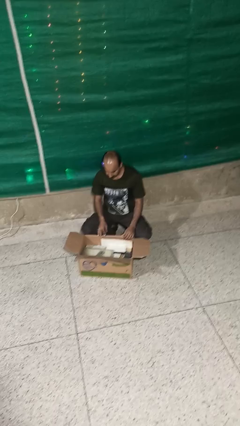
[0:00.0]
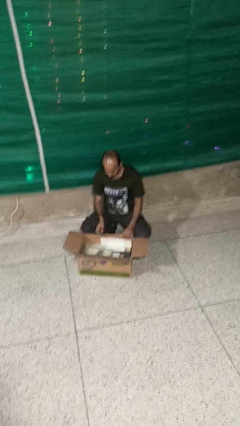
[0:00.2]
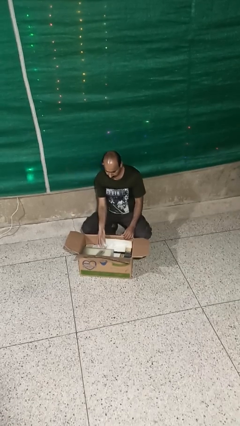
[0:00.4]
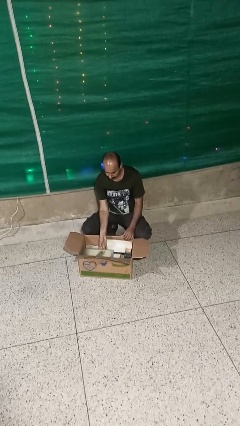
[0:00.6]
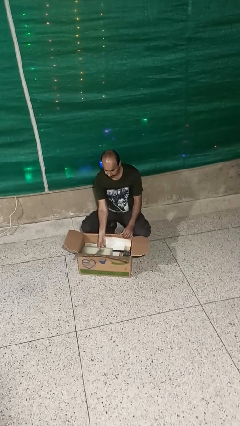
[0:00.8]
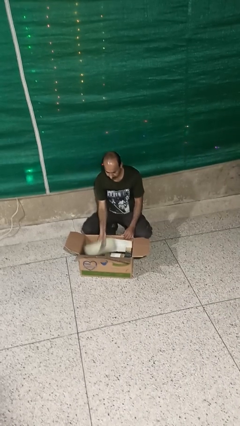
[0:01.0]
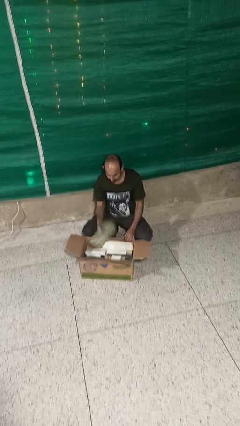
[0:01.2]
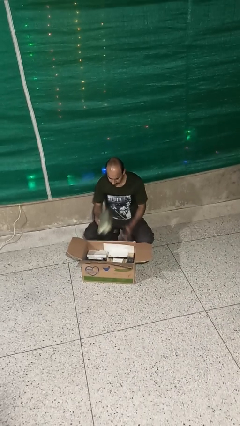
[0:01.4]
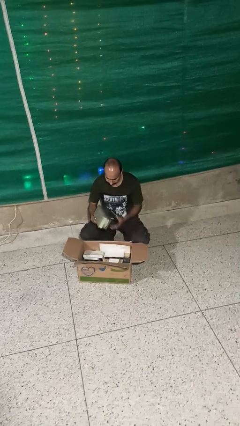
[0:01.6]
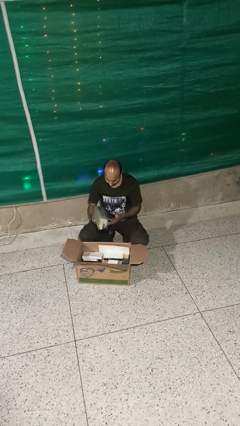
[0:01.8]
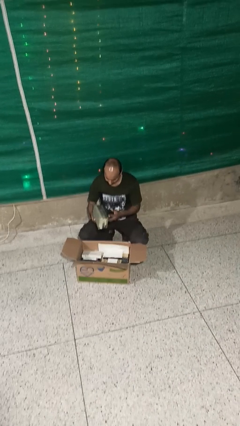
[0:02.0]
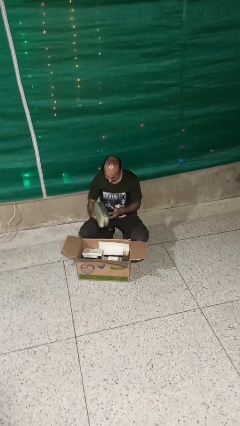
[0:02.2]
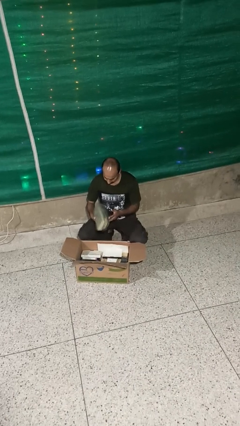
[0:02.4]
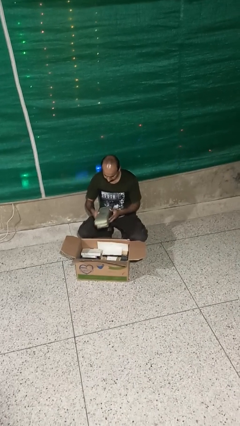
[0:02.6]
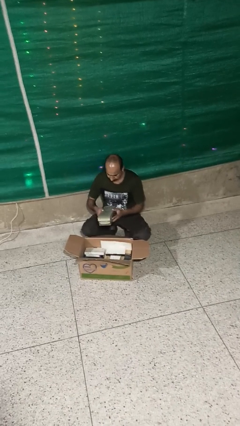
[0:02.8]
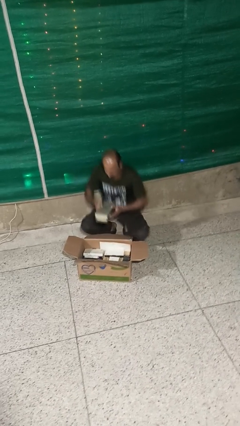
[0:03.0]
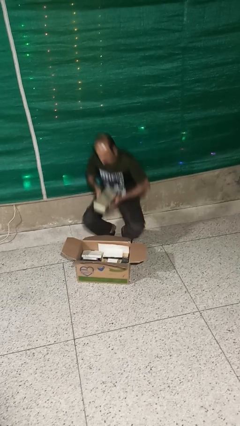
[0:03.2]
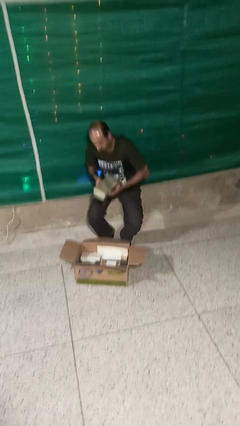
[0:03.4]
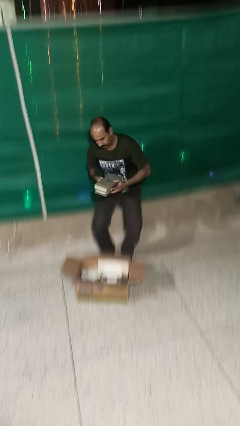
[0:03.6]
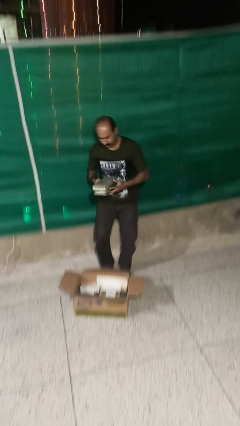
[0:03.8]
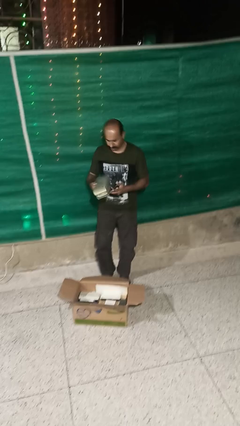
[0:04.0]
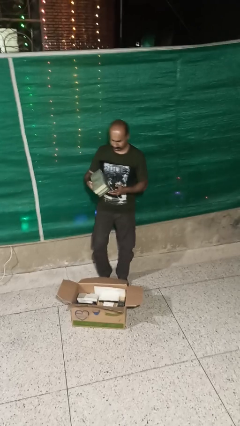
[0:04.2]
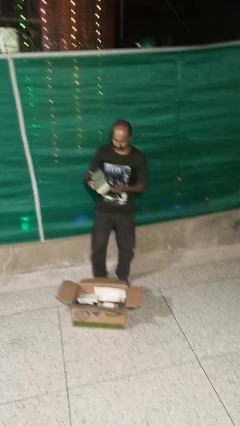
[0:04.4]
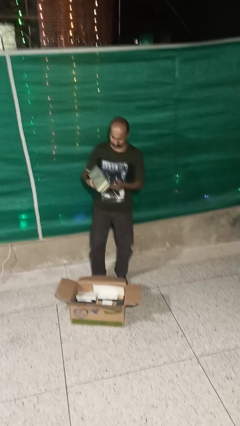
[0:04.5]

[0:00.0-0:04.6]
person takes object from box

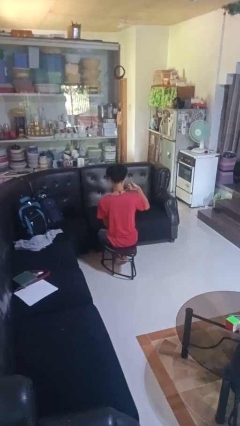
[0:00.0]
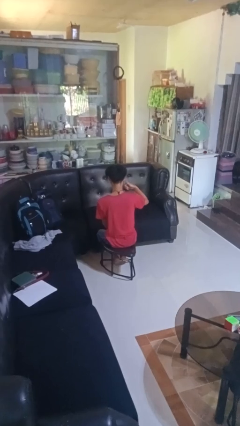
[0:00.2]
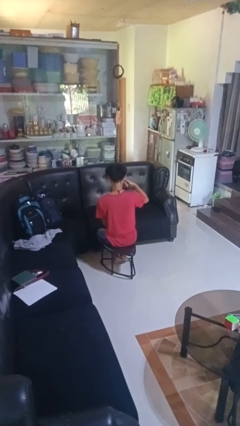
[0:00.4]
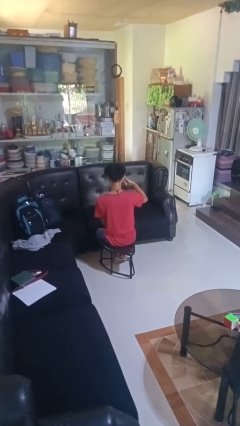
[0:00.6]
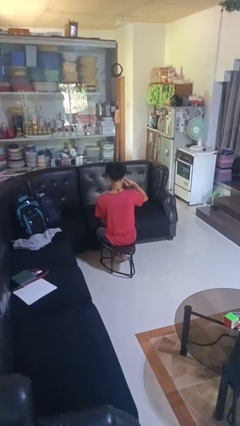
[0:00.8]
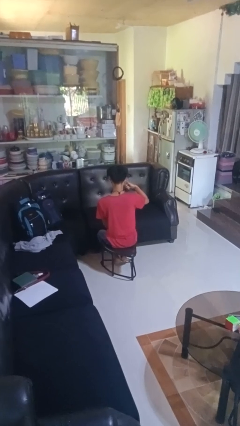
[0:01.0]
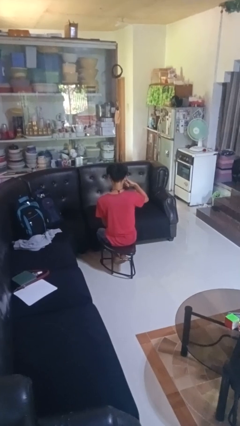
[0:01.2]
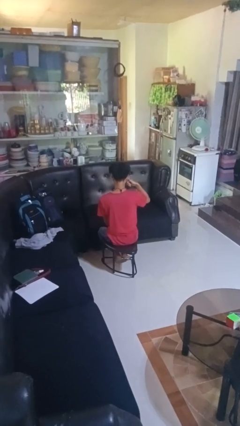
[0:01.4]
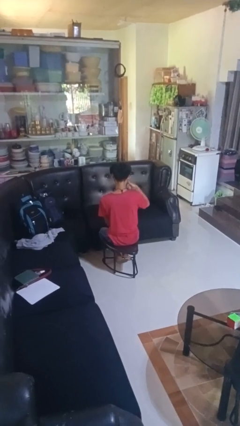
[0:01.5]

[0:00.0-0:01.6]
person gestures call me

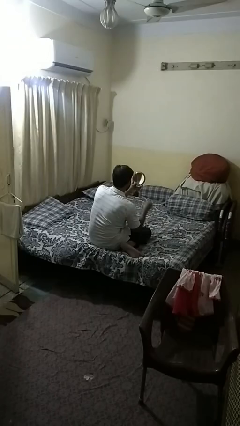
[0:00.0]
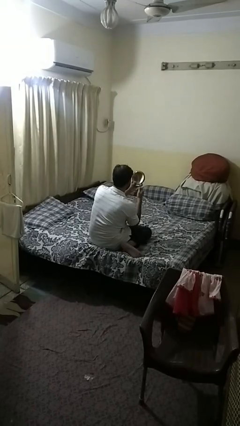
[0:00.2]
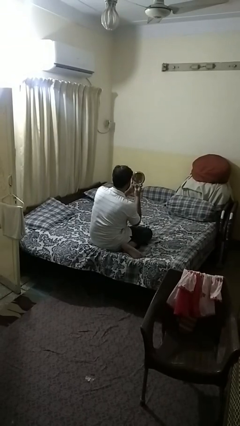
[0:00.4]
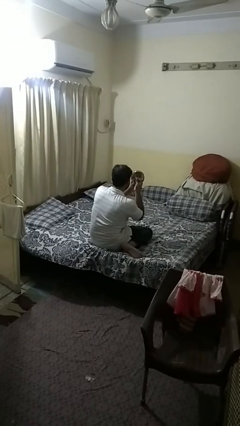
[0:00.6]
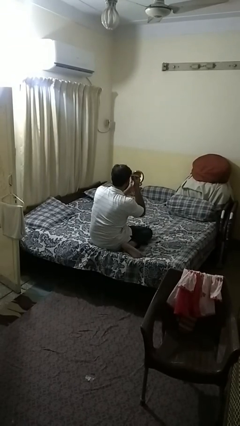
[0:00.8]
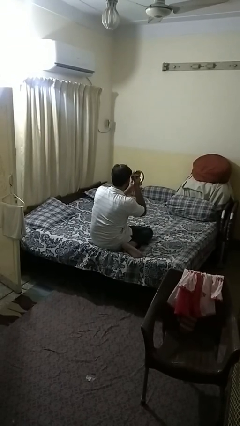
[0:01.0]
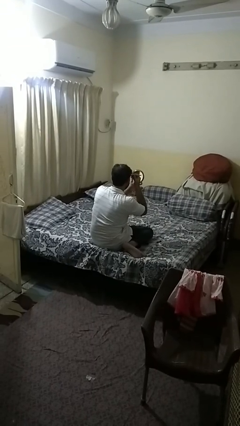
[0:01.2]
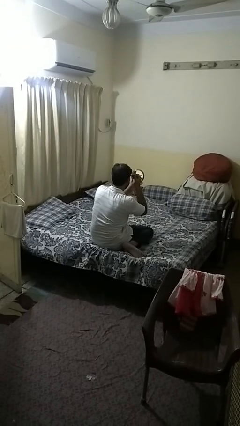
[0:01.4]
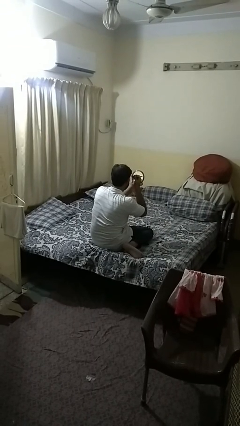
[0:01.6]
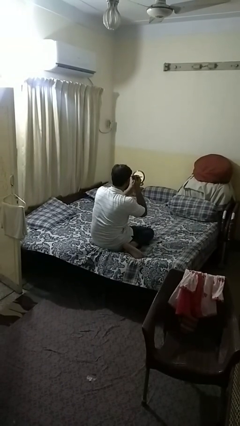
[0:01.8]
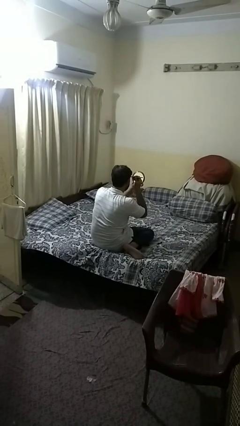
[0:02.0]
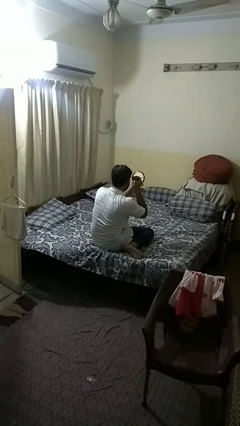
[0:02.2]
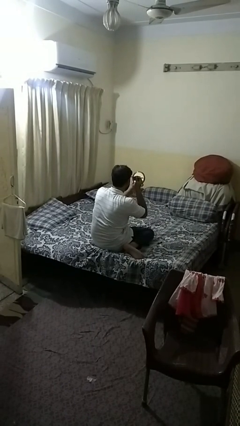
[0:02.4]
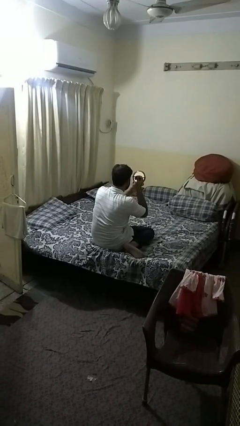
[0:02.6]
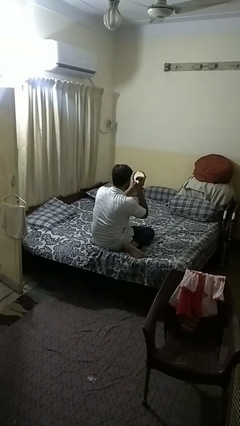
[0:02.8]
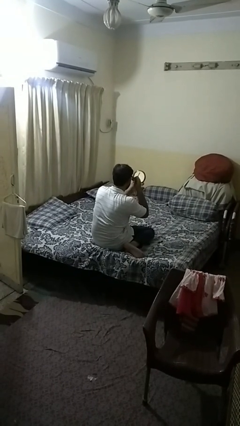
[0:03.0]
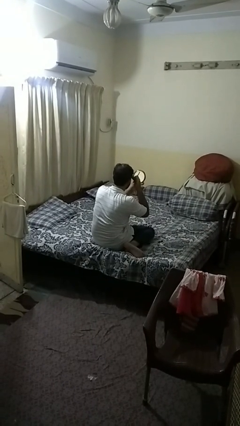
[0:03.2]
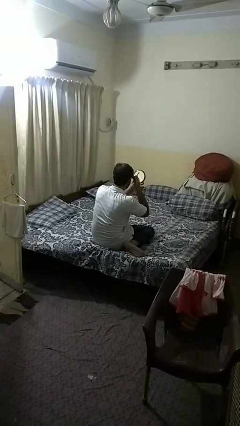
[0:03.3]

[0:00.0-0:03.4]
person applies eye makeup

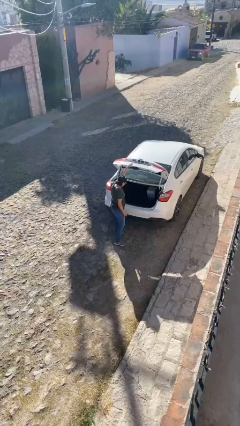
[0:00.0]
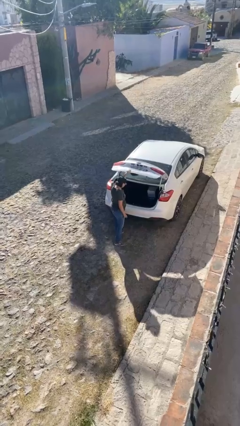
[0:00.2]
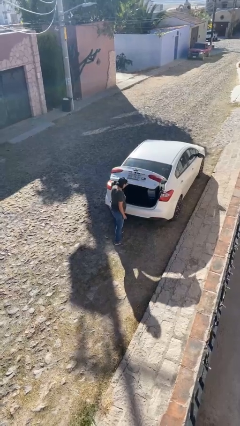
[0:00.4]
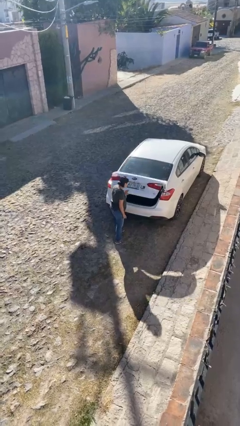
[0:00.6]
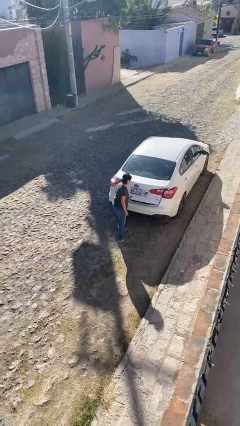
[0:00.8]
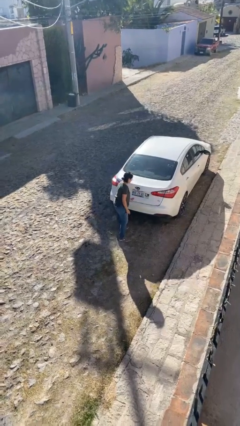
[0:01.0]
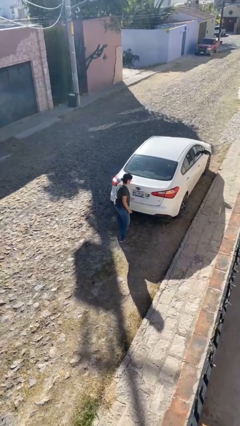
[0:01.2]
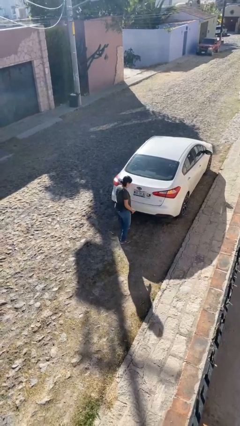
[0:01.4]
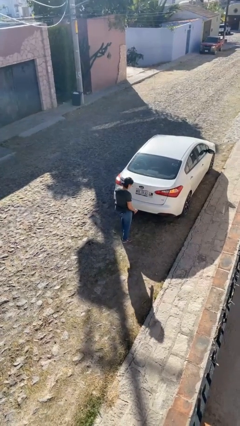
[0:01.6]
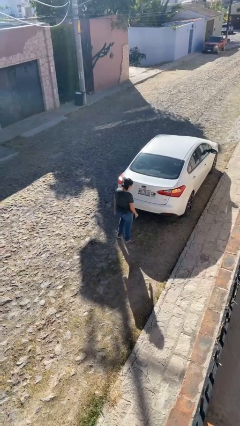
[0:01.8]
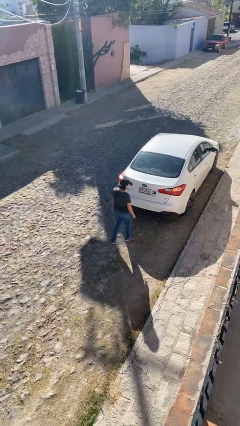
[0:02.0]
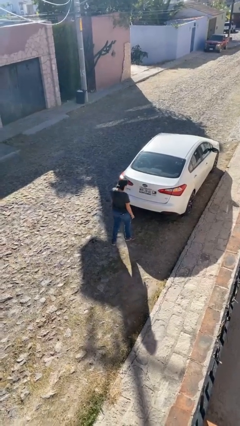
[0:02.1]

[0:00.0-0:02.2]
person closes car trunk

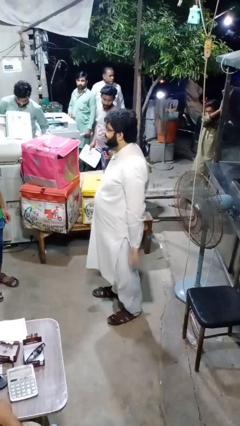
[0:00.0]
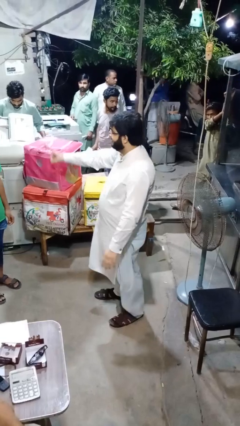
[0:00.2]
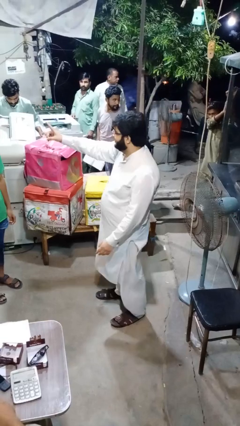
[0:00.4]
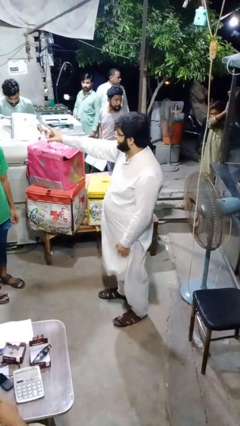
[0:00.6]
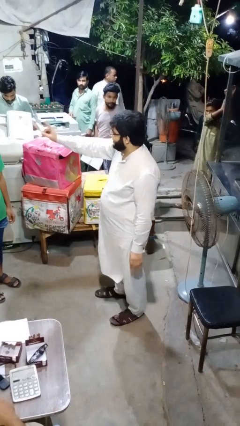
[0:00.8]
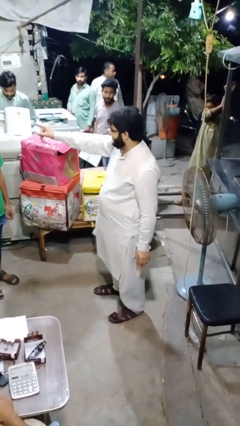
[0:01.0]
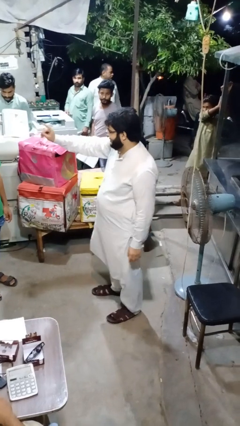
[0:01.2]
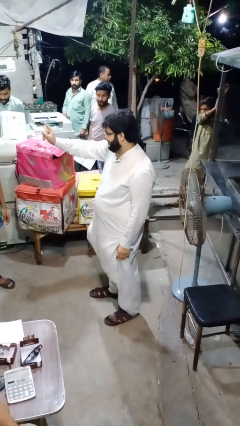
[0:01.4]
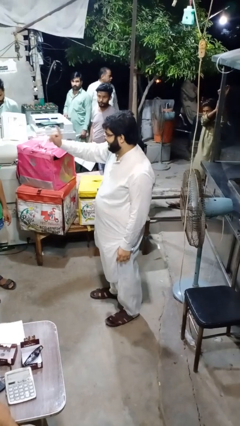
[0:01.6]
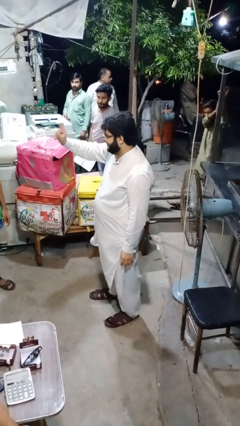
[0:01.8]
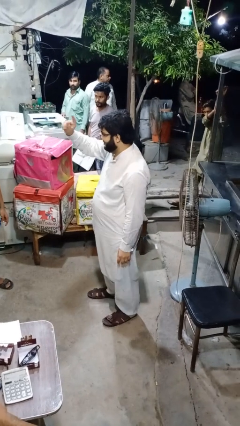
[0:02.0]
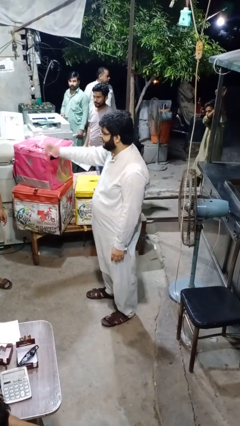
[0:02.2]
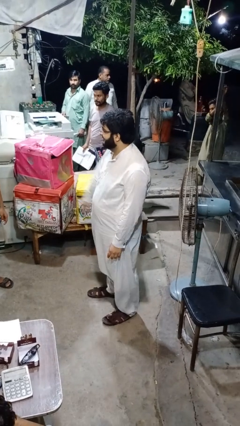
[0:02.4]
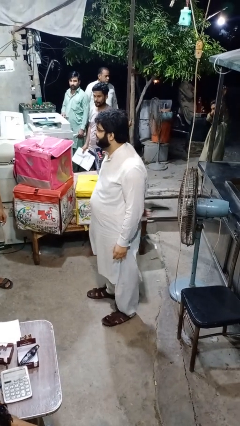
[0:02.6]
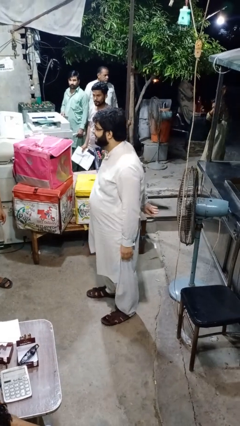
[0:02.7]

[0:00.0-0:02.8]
person points at person

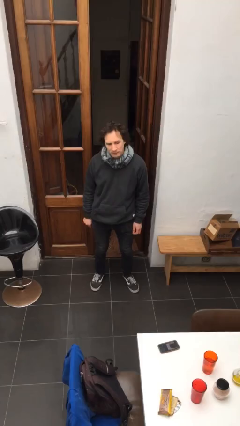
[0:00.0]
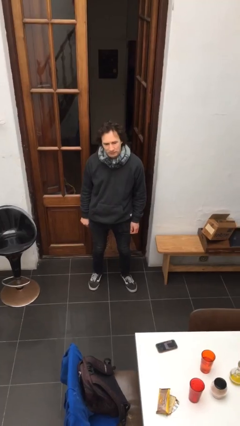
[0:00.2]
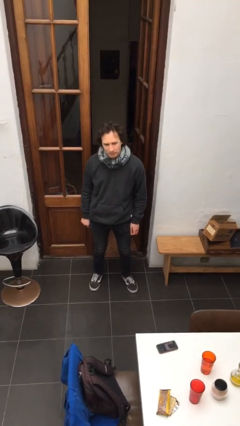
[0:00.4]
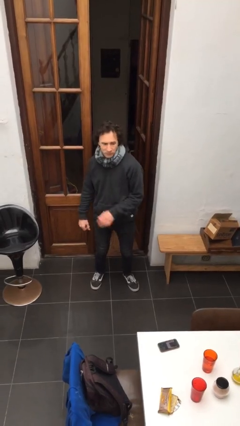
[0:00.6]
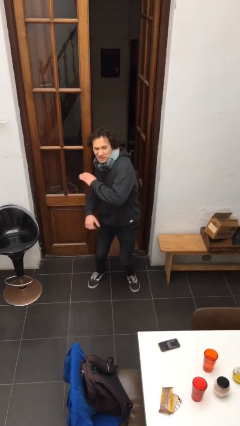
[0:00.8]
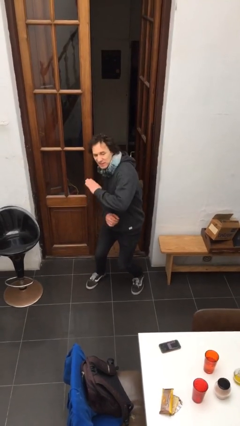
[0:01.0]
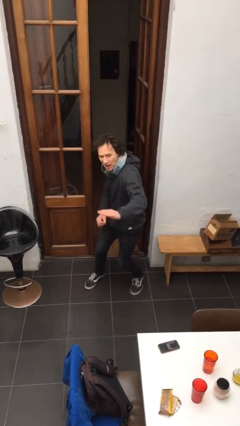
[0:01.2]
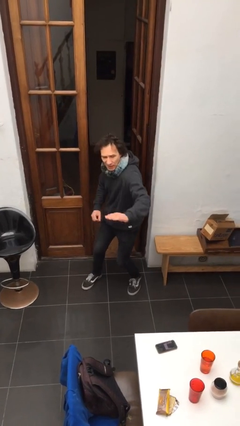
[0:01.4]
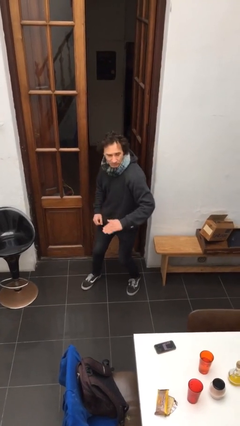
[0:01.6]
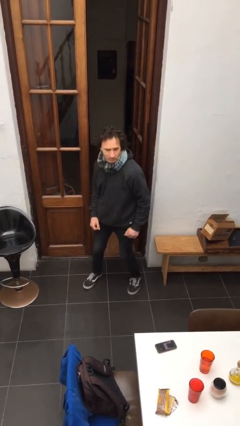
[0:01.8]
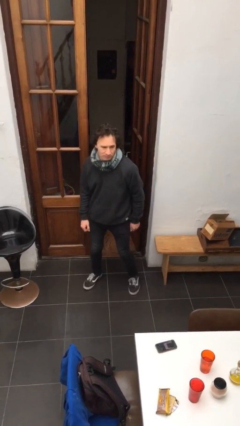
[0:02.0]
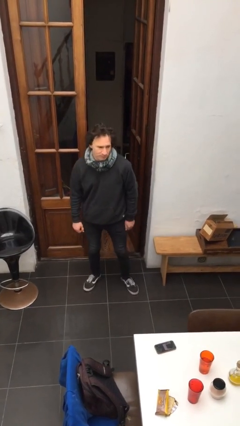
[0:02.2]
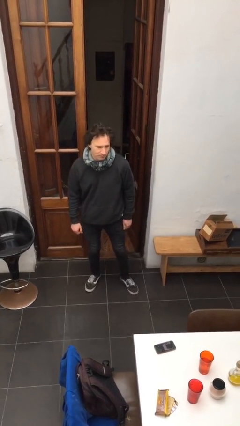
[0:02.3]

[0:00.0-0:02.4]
person karate chop

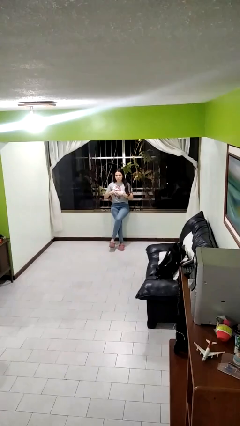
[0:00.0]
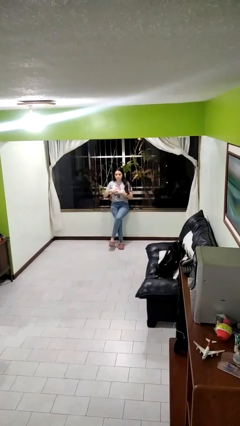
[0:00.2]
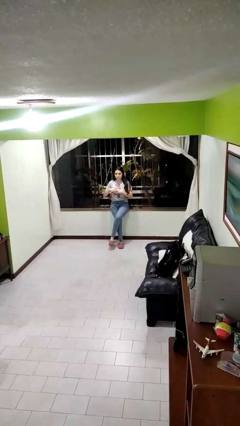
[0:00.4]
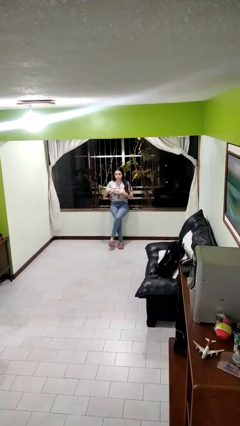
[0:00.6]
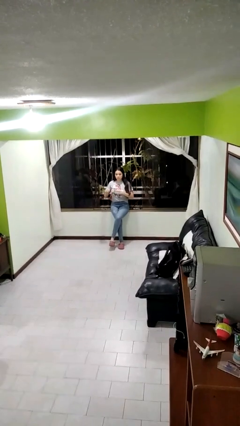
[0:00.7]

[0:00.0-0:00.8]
person puts on ring
